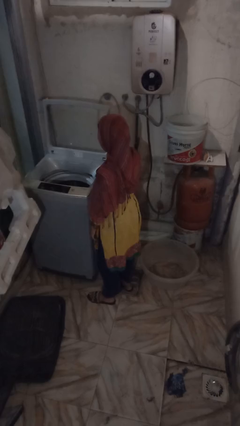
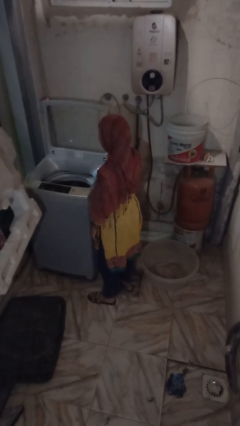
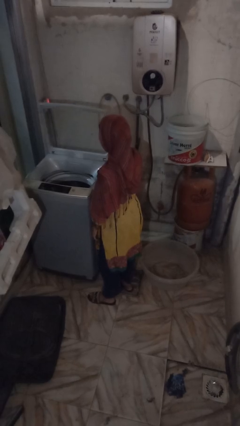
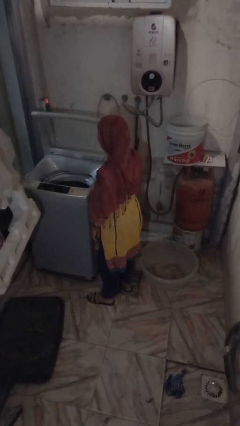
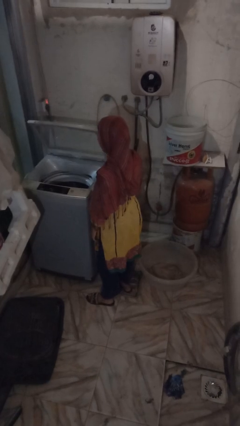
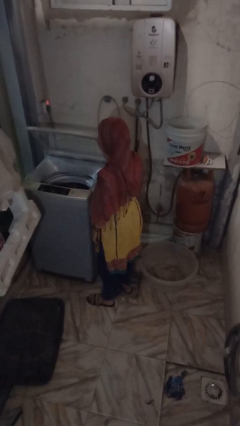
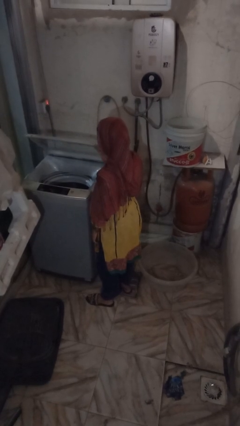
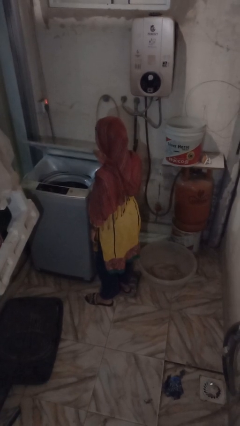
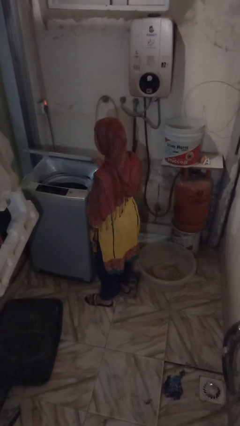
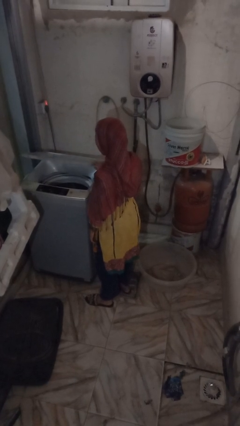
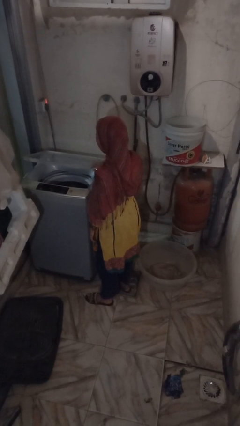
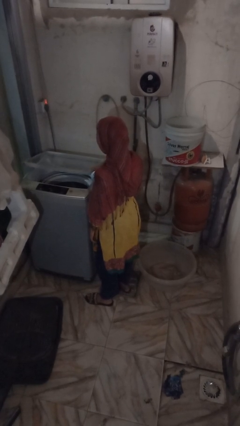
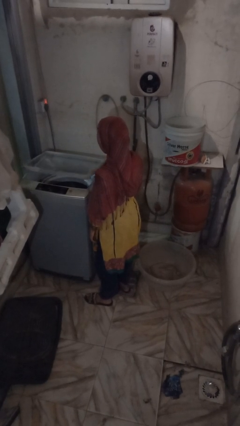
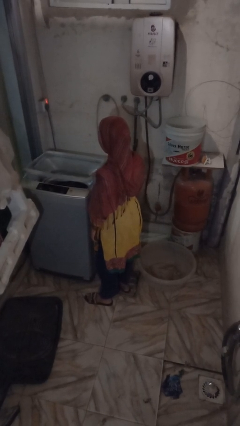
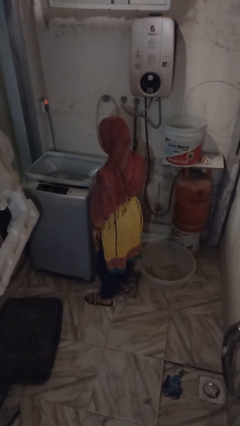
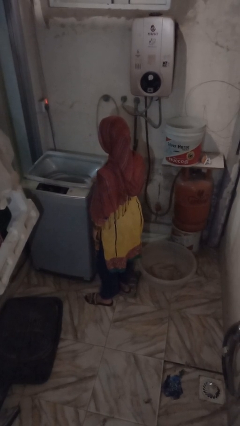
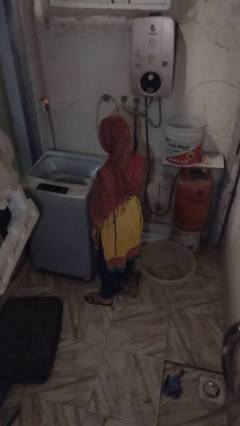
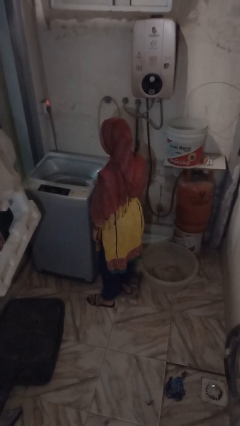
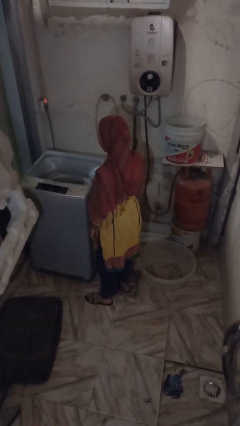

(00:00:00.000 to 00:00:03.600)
person closes clothes washer

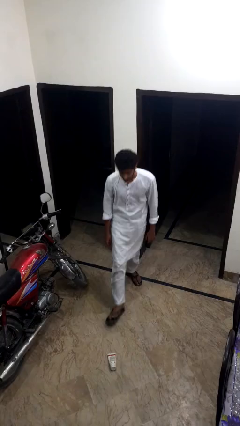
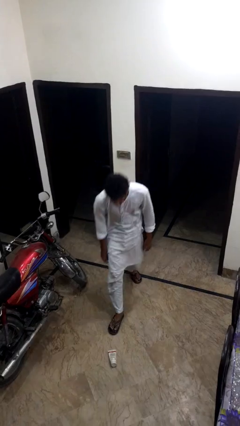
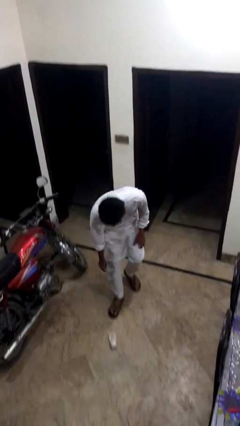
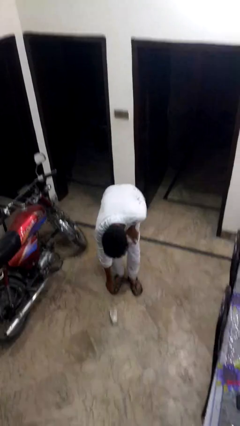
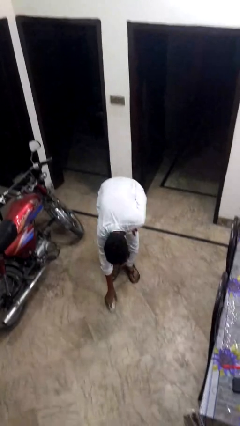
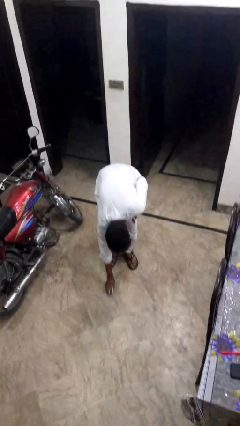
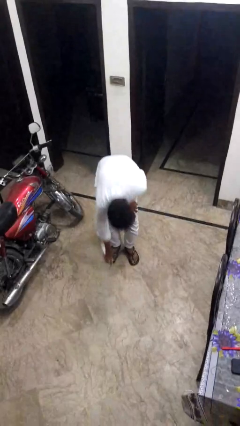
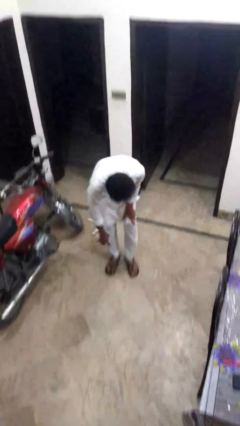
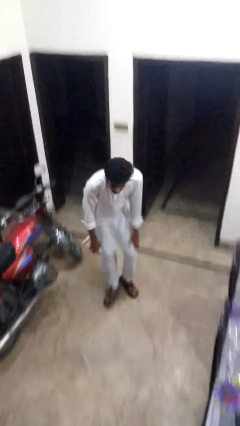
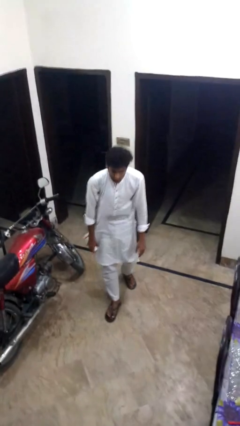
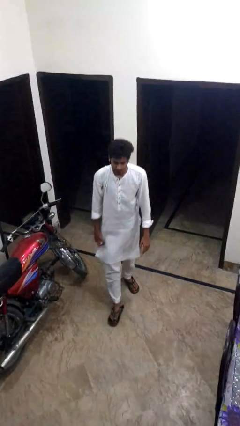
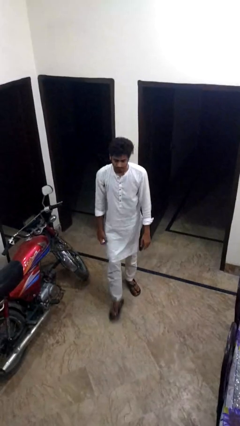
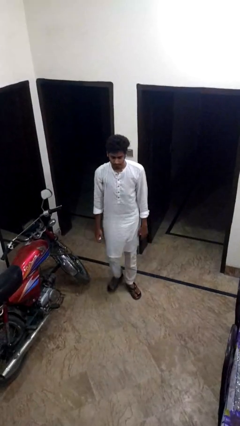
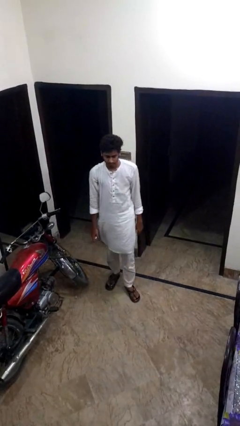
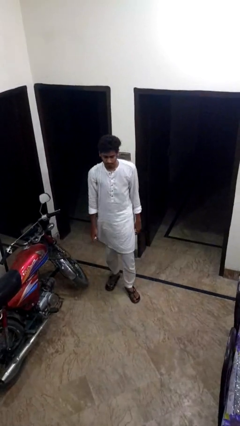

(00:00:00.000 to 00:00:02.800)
person picks up object from floor

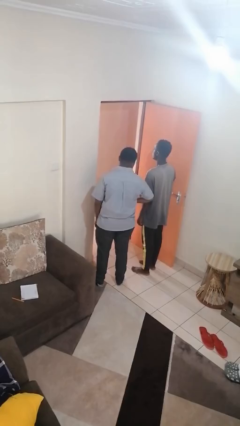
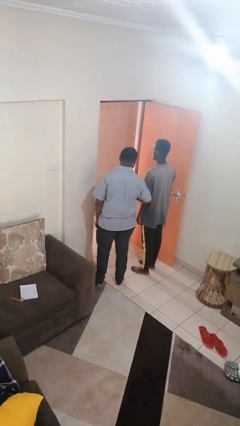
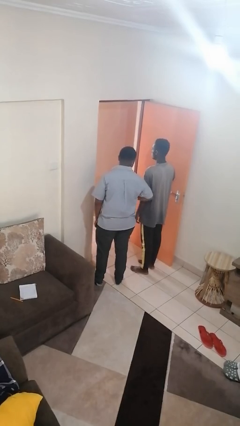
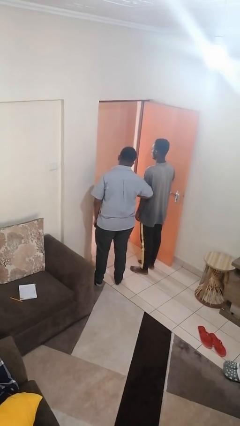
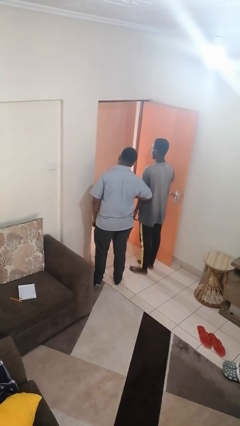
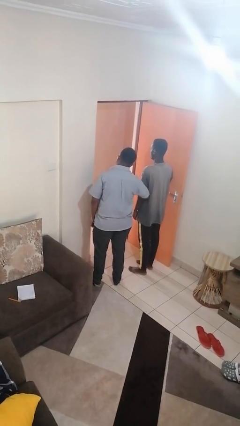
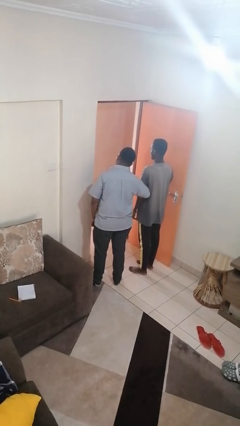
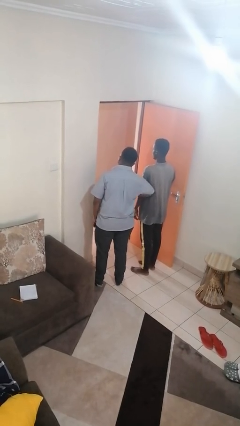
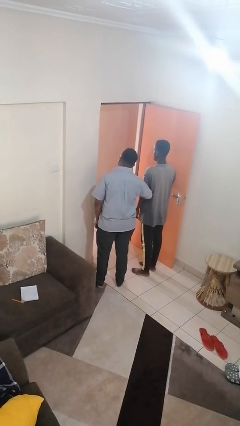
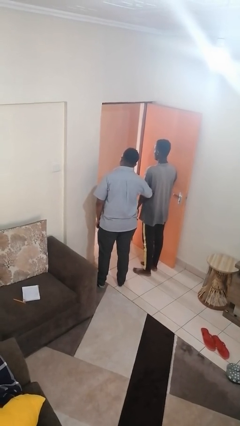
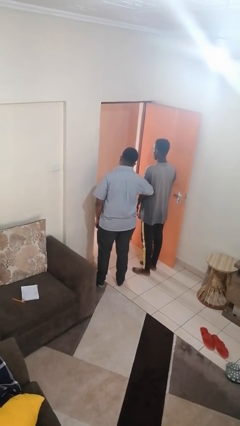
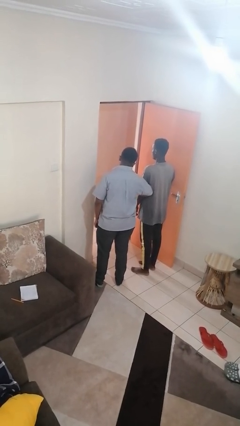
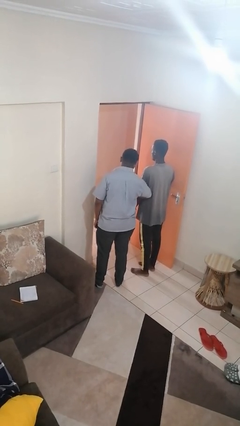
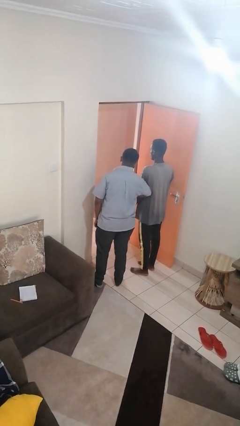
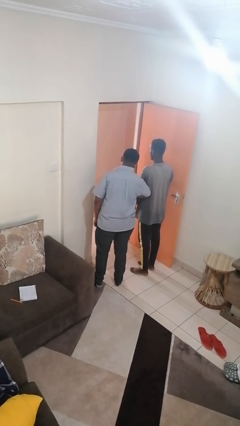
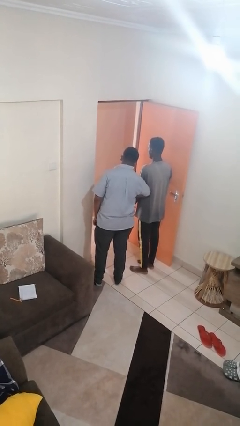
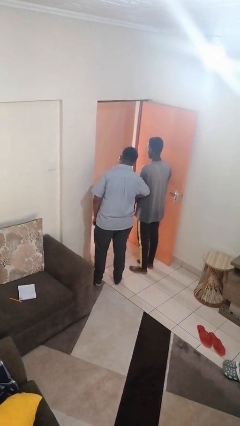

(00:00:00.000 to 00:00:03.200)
person nudges person with elbow

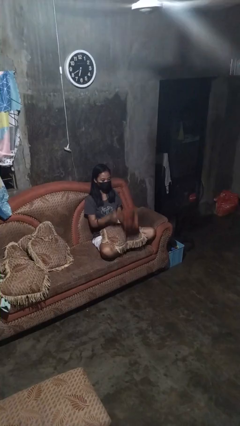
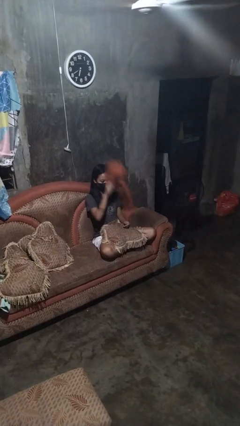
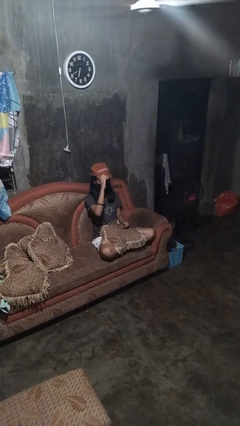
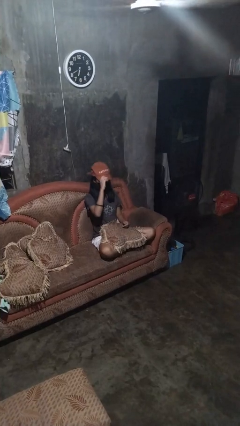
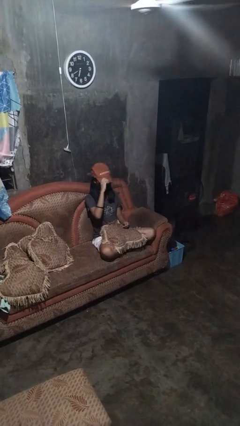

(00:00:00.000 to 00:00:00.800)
person puts on hat

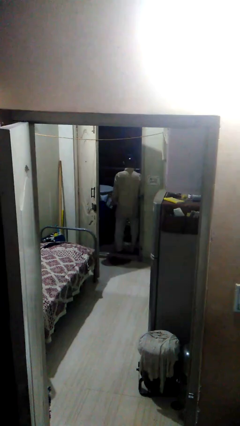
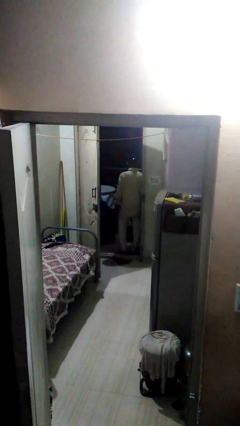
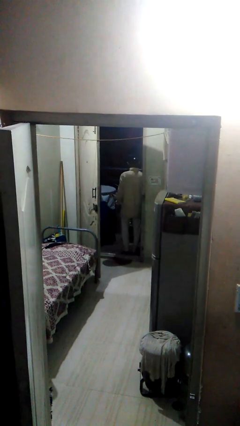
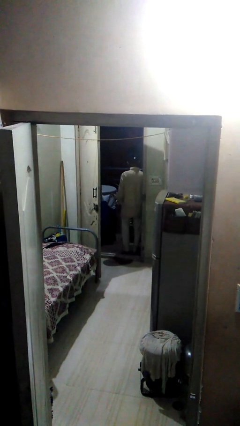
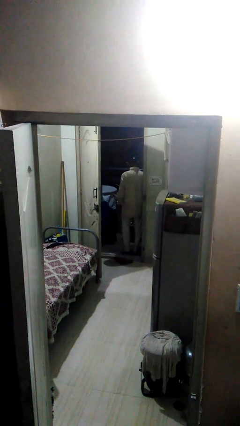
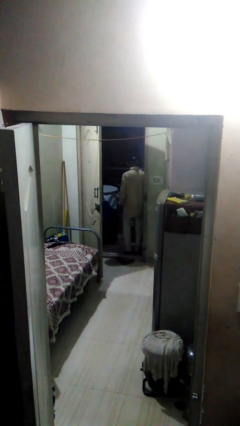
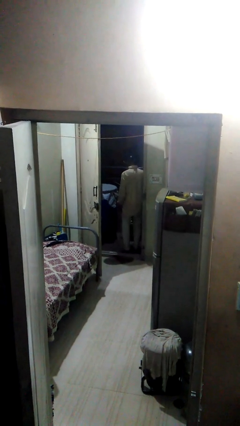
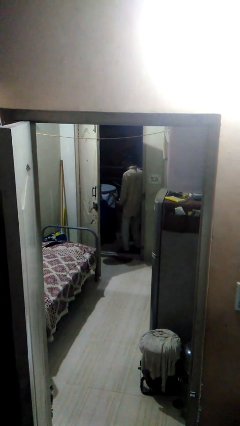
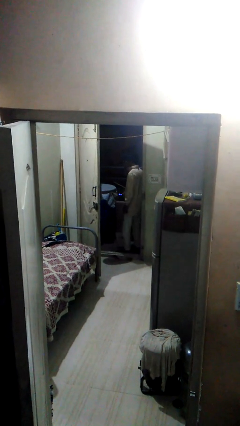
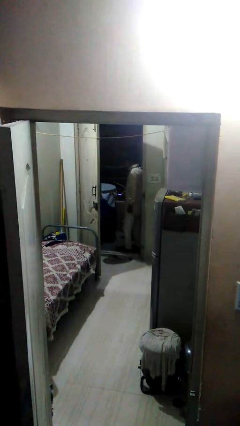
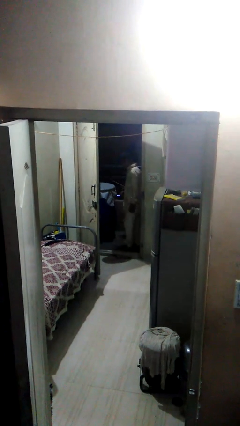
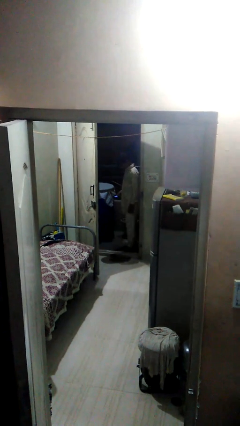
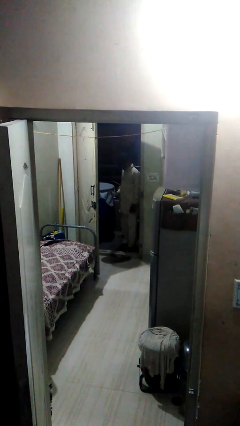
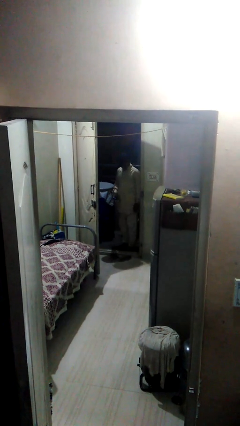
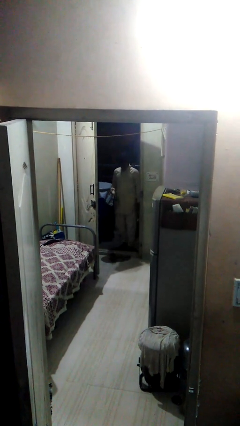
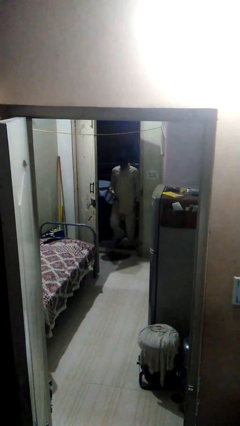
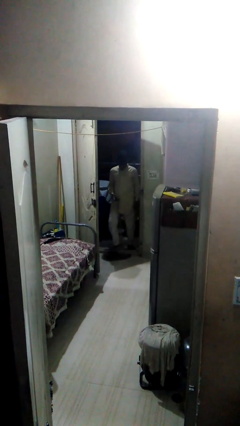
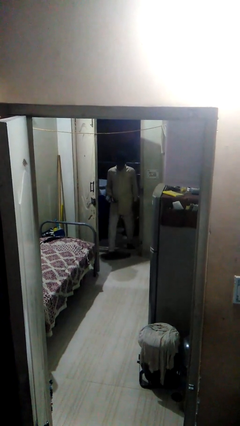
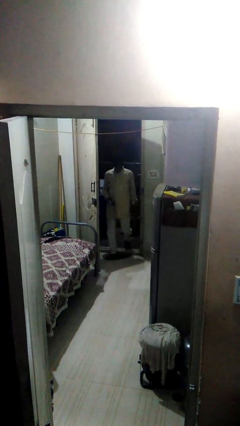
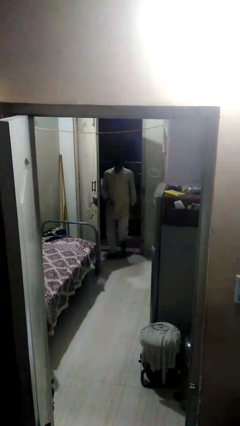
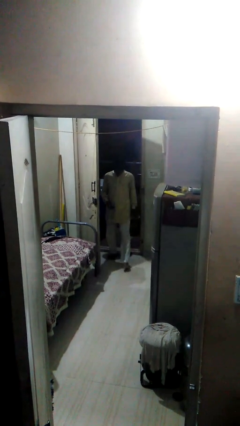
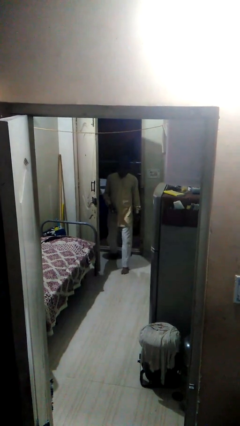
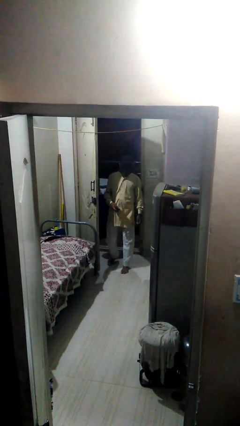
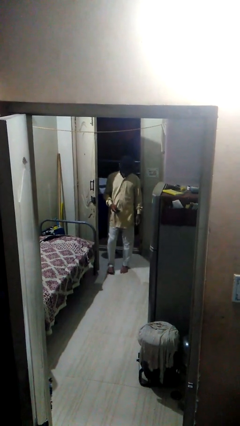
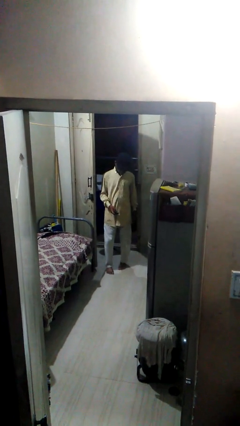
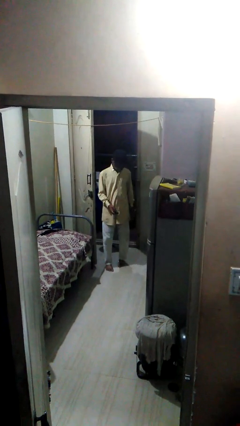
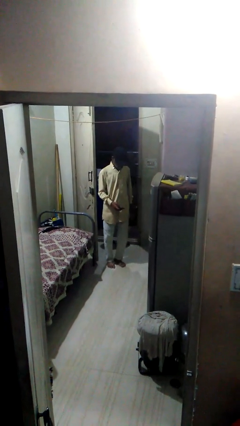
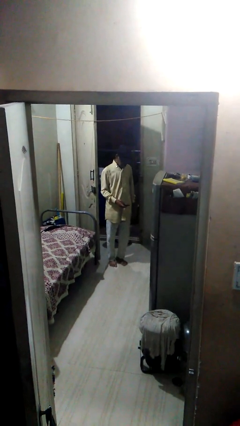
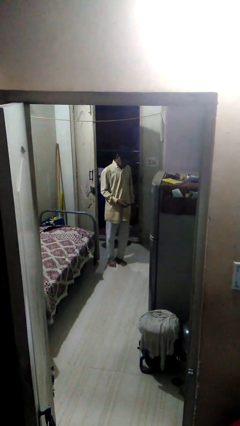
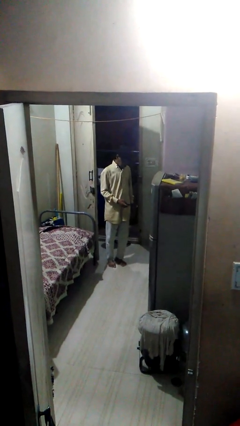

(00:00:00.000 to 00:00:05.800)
person enters scene through structure

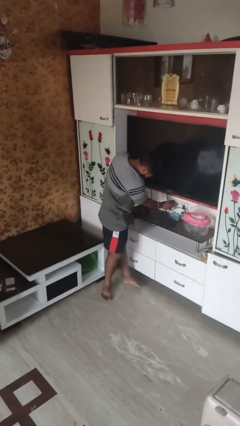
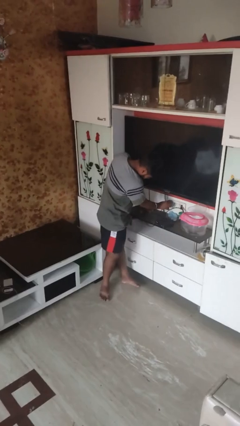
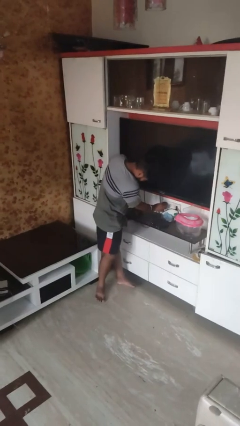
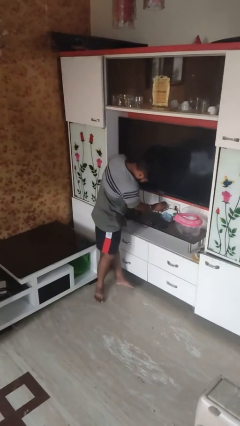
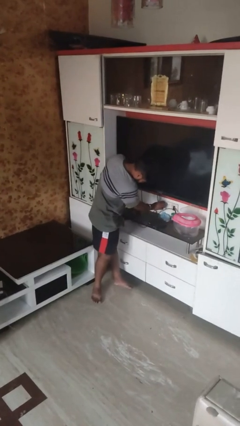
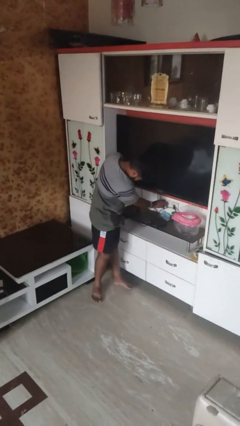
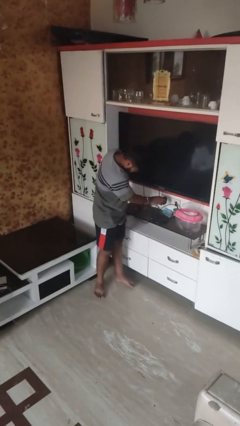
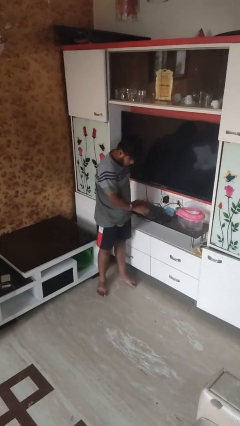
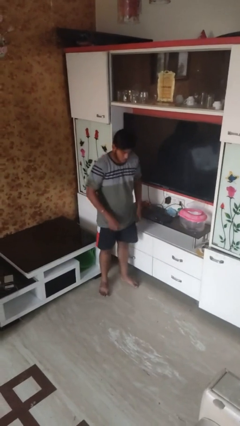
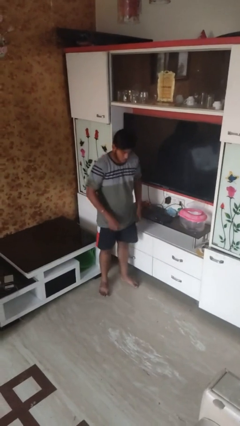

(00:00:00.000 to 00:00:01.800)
person plugs into electrical socket
